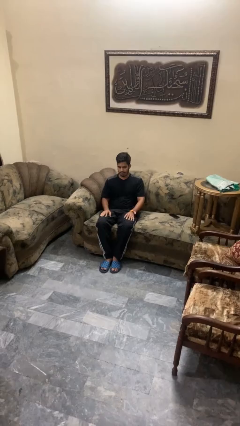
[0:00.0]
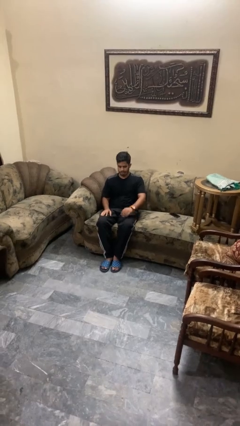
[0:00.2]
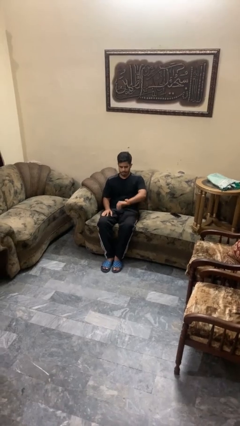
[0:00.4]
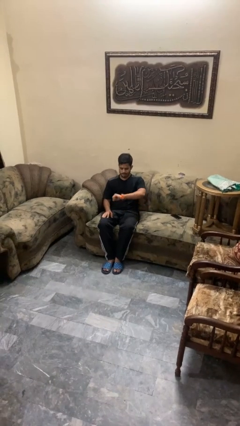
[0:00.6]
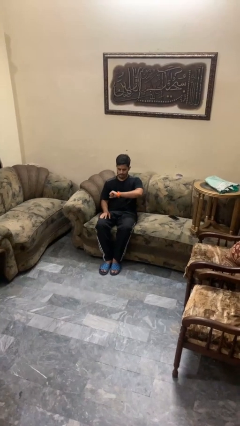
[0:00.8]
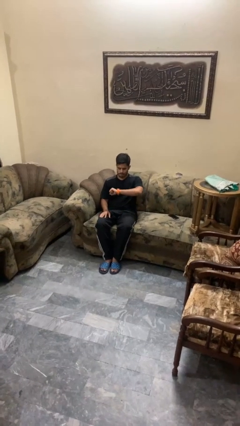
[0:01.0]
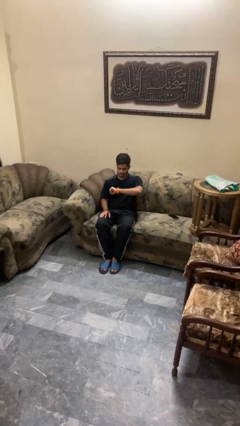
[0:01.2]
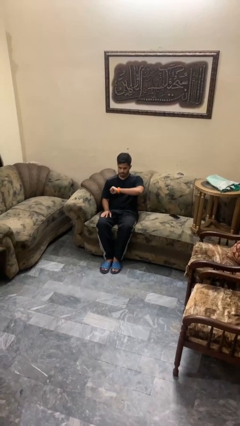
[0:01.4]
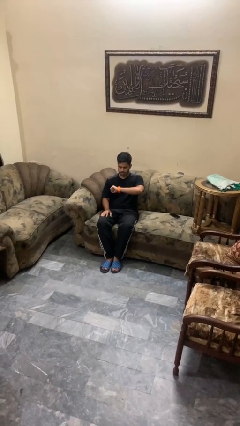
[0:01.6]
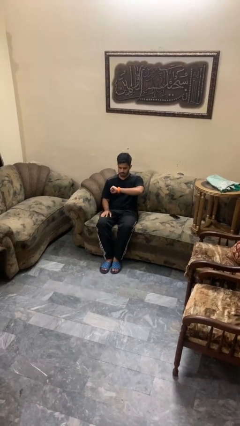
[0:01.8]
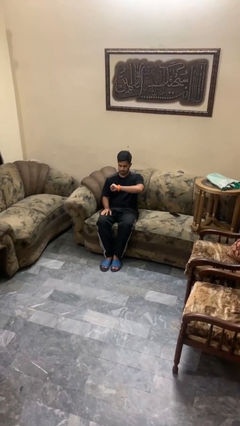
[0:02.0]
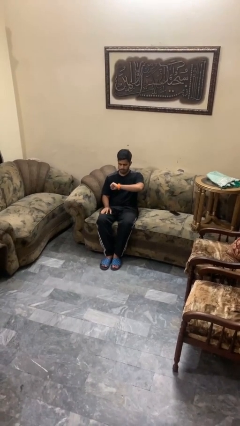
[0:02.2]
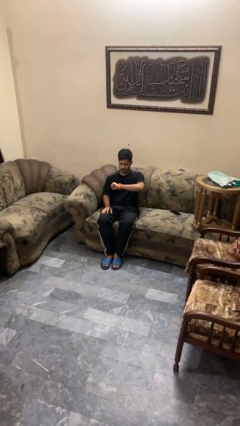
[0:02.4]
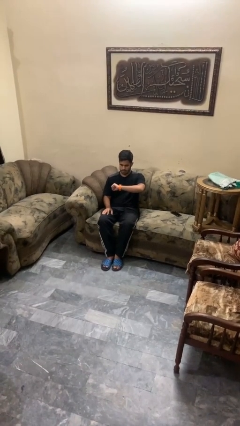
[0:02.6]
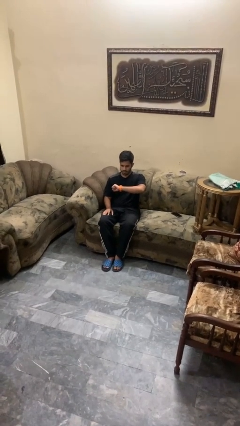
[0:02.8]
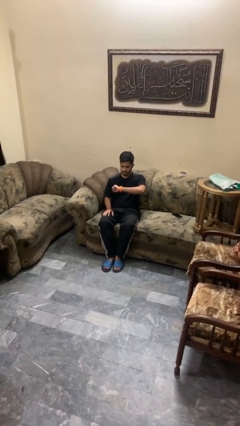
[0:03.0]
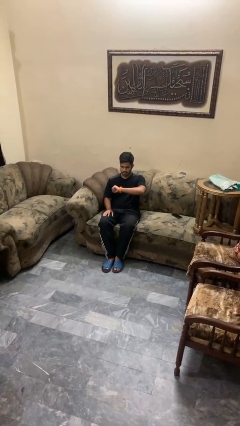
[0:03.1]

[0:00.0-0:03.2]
person looks at wristwatch

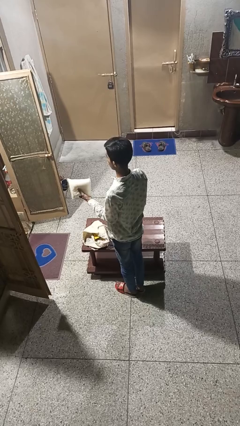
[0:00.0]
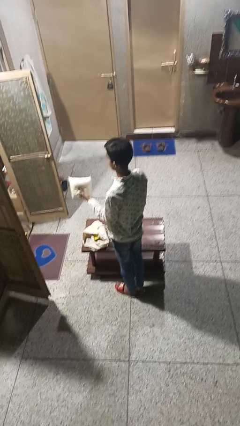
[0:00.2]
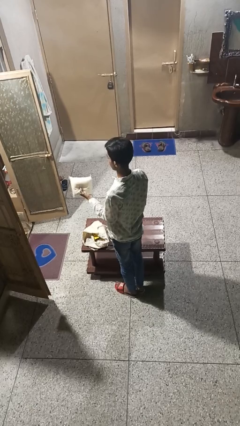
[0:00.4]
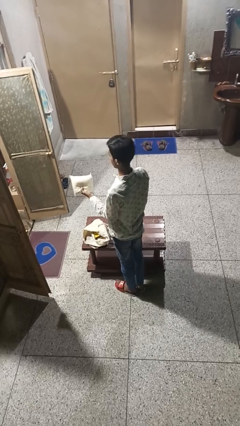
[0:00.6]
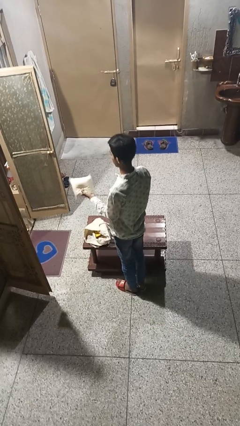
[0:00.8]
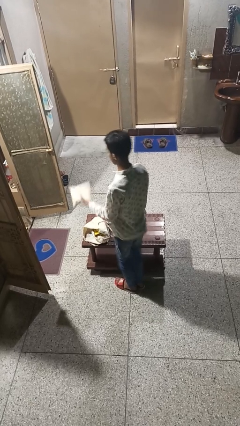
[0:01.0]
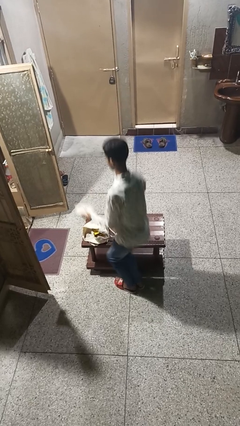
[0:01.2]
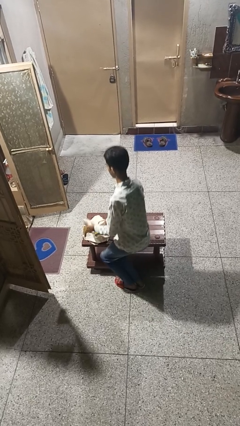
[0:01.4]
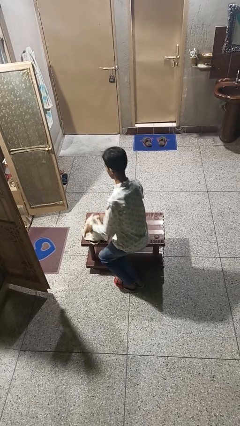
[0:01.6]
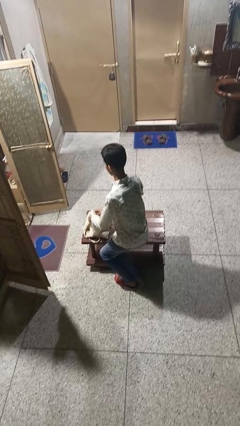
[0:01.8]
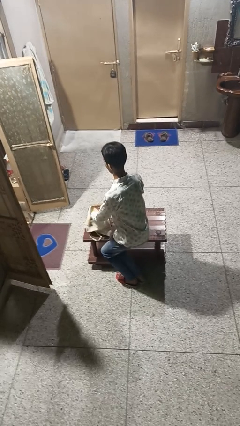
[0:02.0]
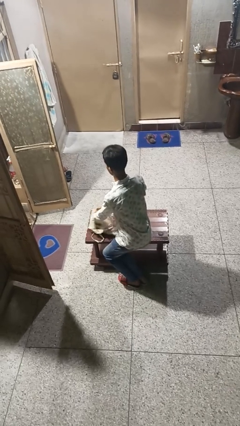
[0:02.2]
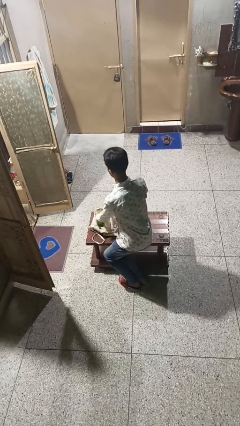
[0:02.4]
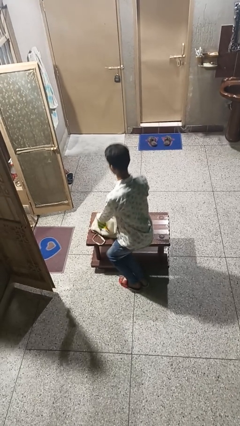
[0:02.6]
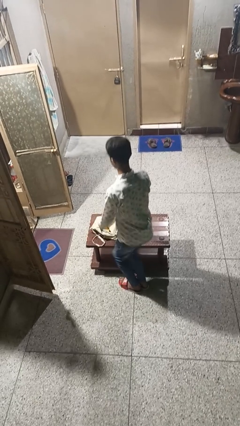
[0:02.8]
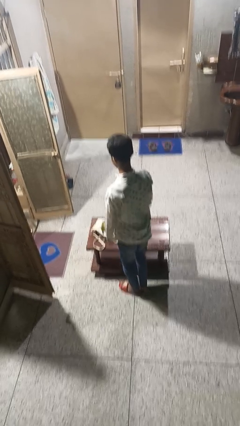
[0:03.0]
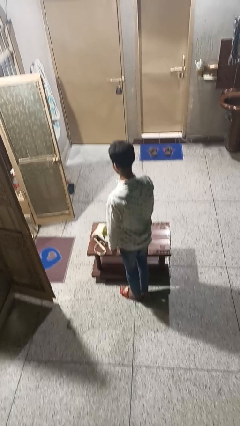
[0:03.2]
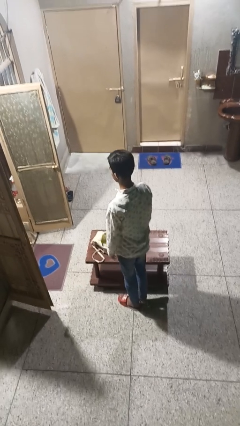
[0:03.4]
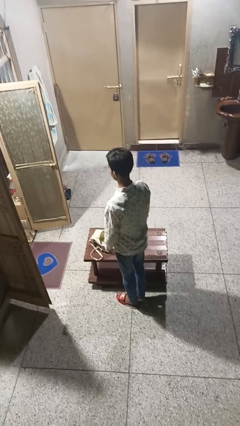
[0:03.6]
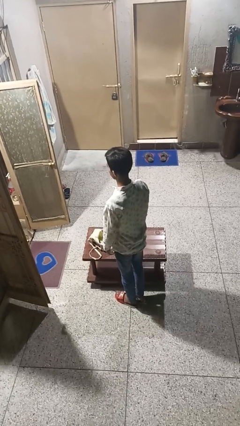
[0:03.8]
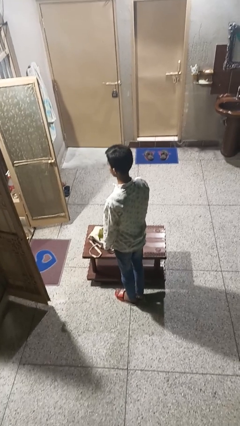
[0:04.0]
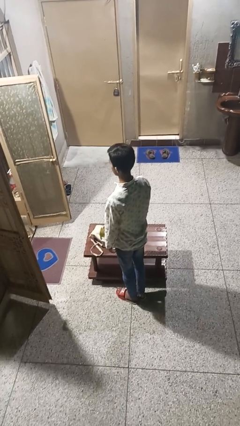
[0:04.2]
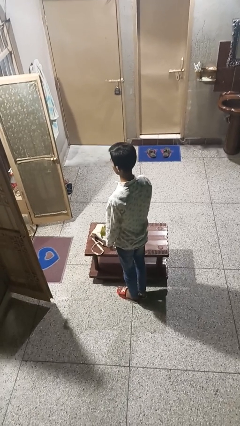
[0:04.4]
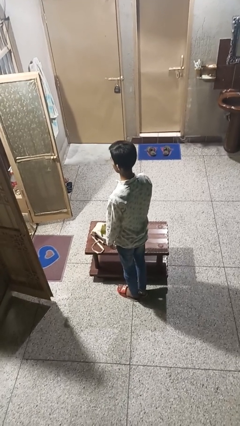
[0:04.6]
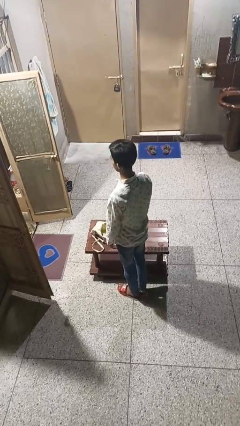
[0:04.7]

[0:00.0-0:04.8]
person puts object into bag

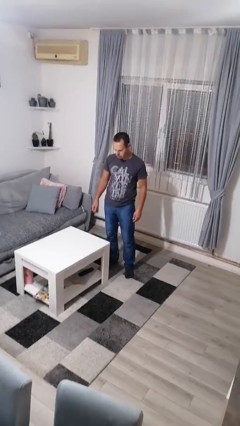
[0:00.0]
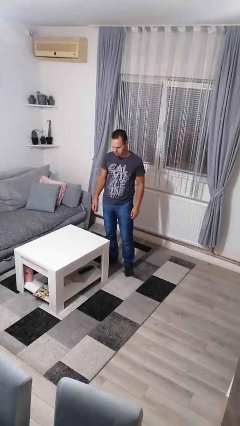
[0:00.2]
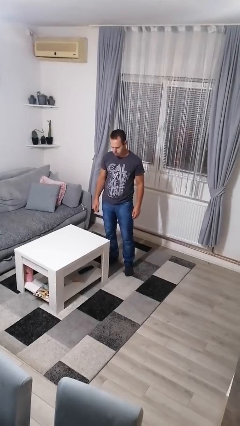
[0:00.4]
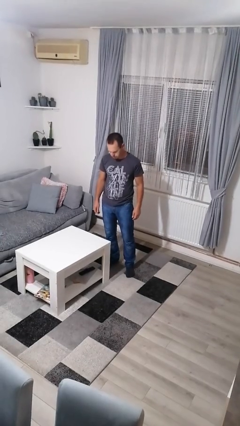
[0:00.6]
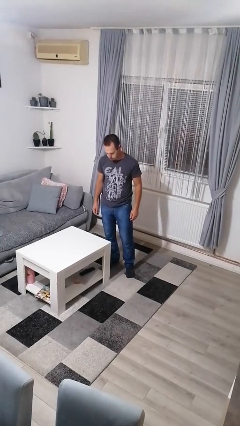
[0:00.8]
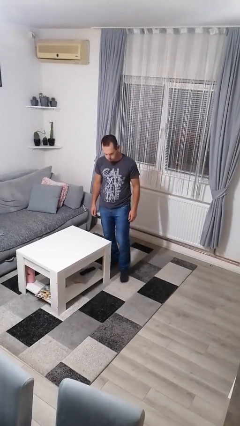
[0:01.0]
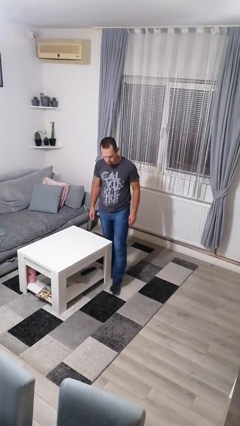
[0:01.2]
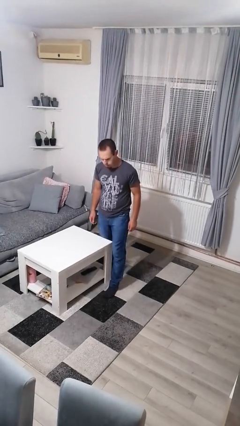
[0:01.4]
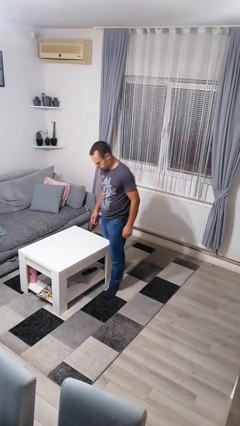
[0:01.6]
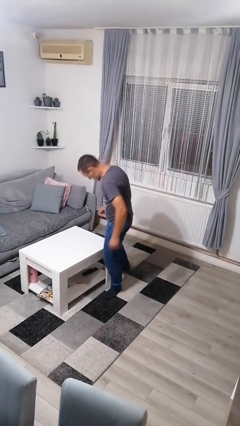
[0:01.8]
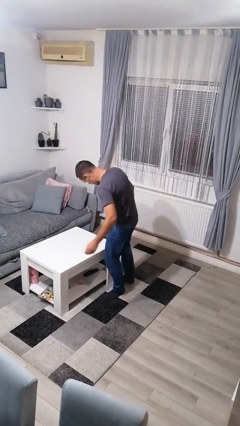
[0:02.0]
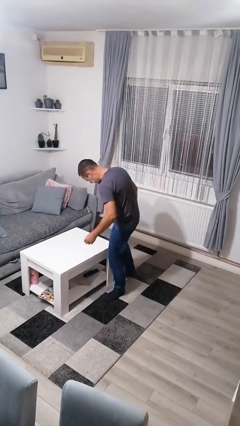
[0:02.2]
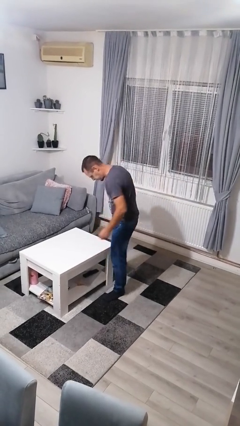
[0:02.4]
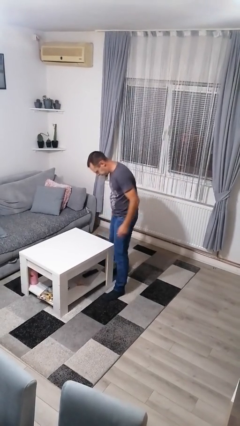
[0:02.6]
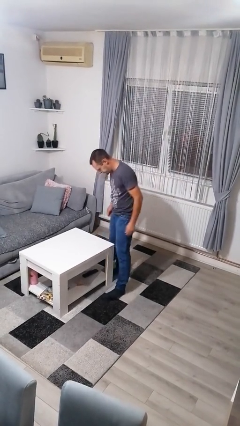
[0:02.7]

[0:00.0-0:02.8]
person bumps into table

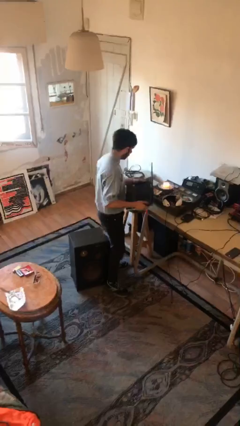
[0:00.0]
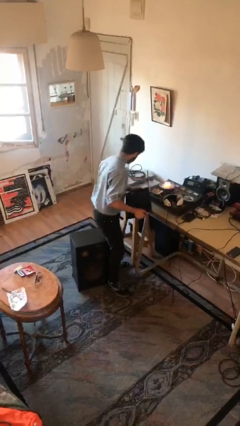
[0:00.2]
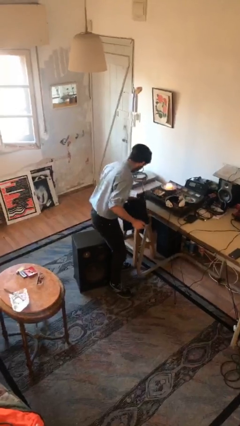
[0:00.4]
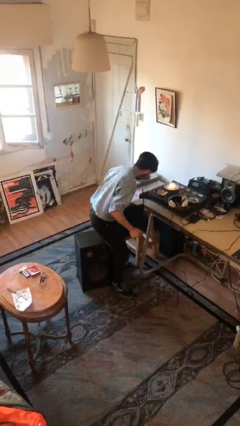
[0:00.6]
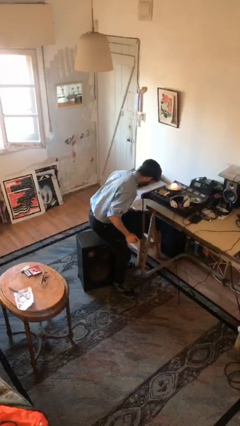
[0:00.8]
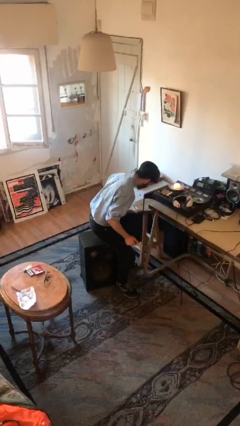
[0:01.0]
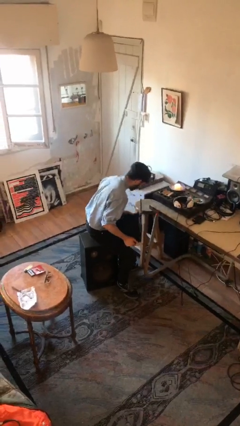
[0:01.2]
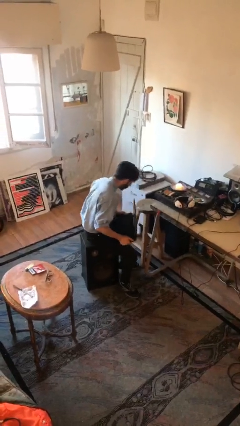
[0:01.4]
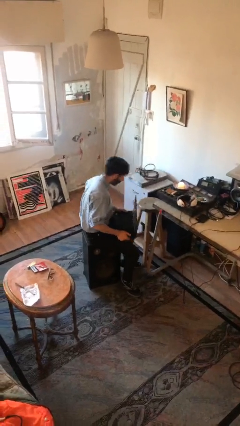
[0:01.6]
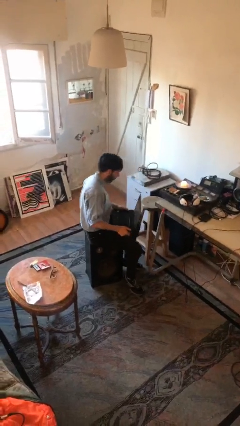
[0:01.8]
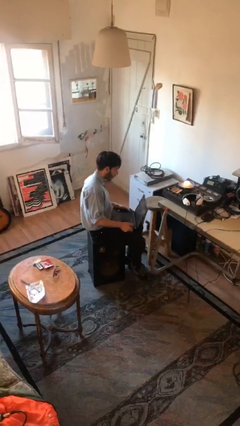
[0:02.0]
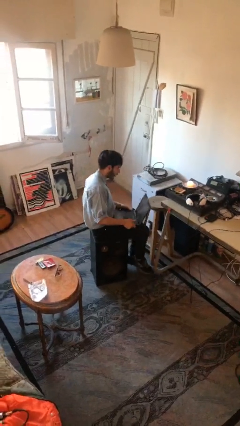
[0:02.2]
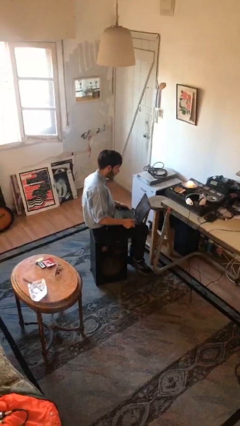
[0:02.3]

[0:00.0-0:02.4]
person sits down

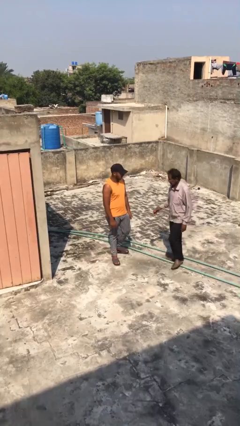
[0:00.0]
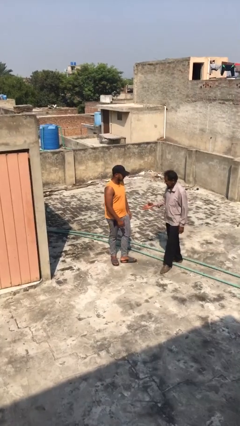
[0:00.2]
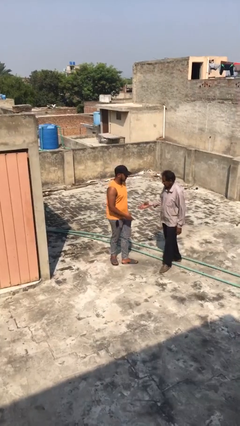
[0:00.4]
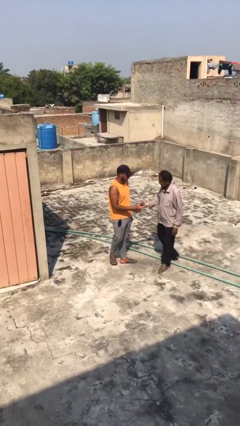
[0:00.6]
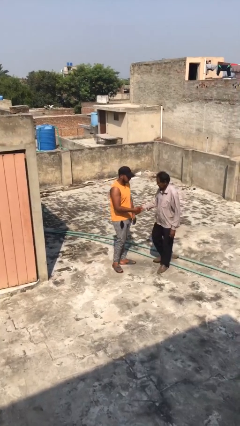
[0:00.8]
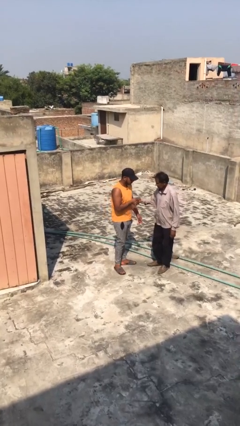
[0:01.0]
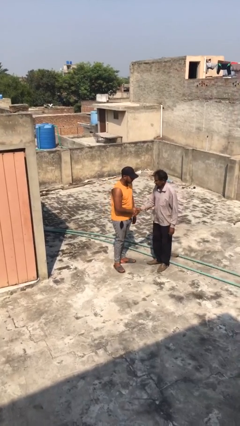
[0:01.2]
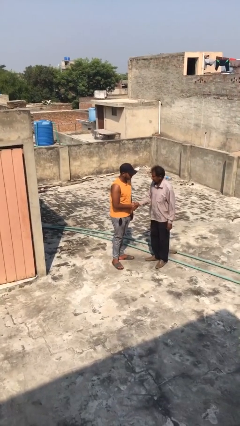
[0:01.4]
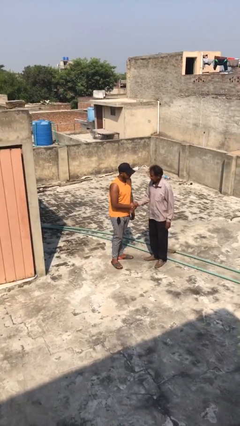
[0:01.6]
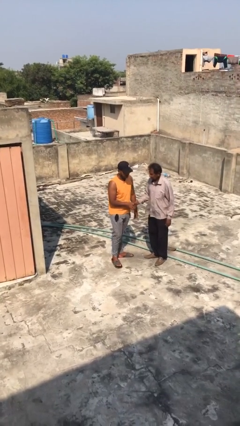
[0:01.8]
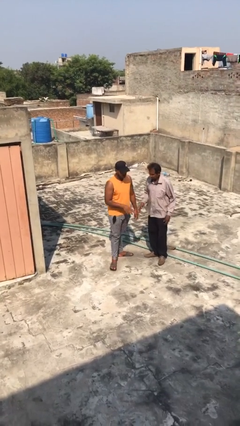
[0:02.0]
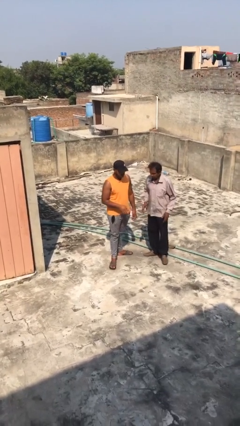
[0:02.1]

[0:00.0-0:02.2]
person shakes hand

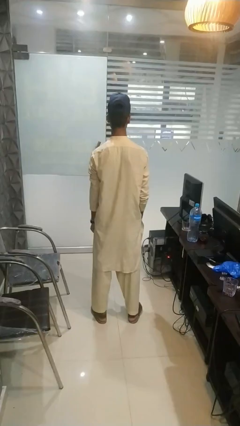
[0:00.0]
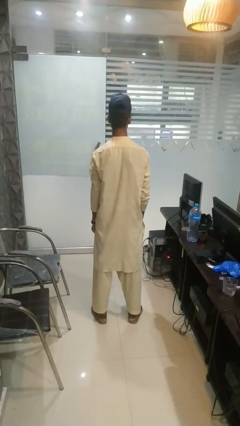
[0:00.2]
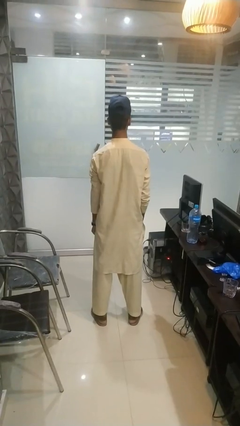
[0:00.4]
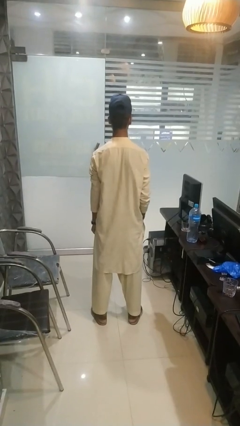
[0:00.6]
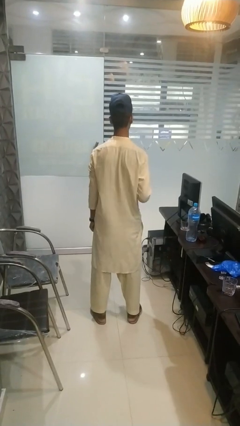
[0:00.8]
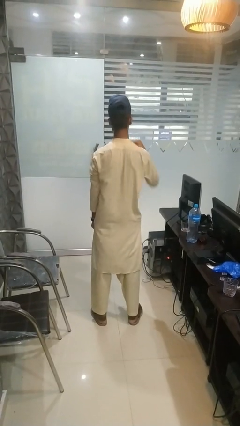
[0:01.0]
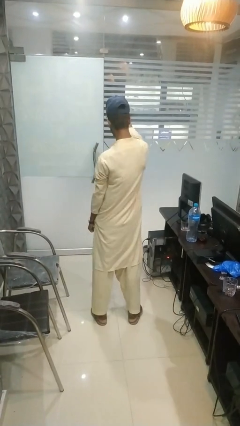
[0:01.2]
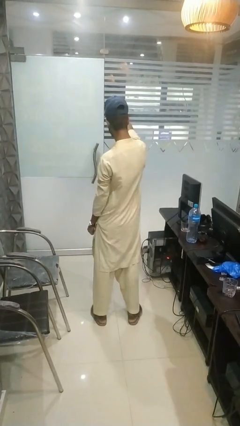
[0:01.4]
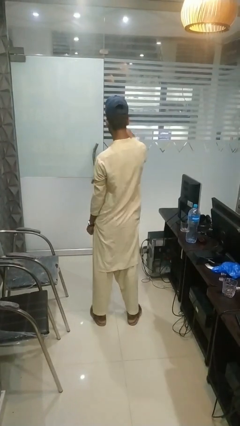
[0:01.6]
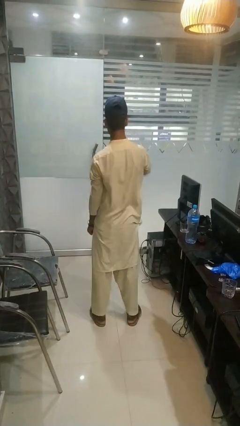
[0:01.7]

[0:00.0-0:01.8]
person karate chop
